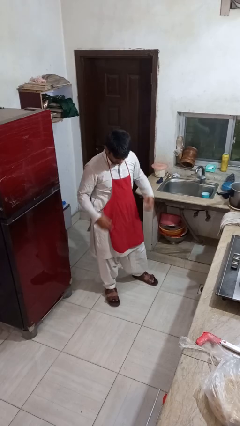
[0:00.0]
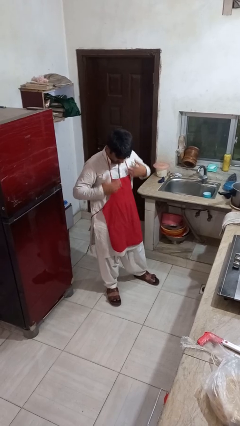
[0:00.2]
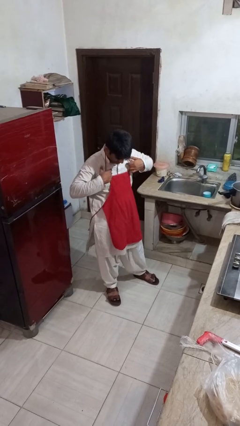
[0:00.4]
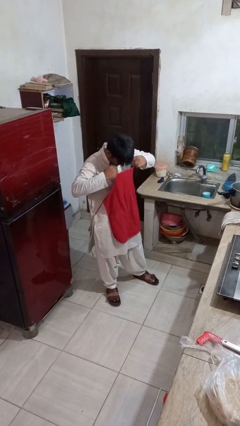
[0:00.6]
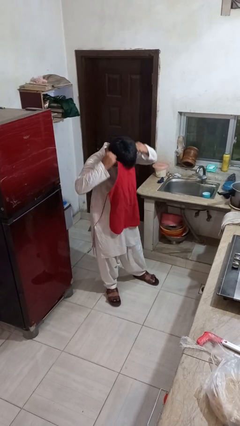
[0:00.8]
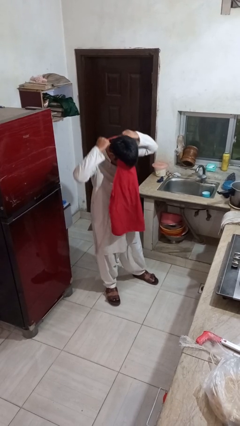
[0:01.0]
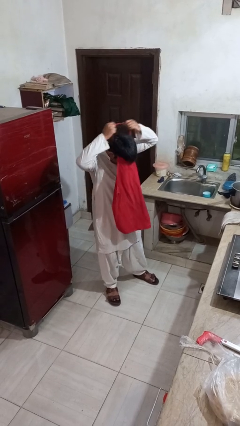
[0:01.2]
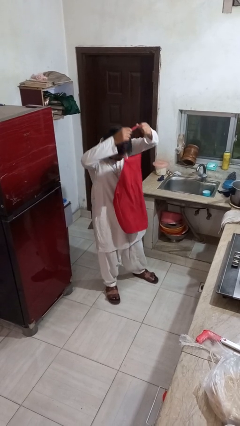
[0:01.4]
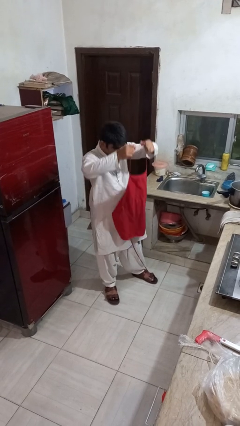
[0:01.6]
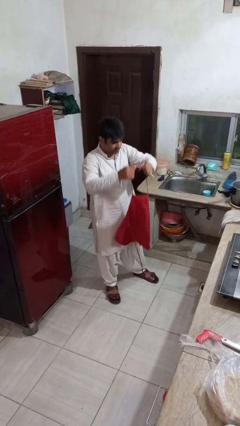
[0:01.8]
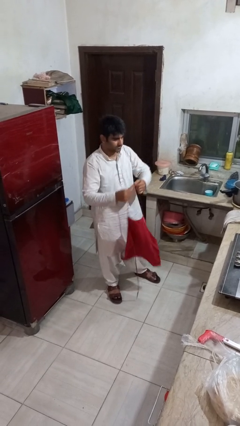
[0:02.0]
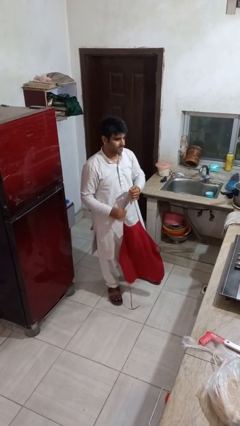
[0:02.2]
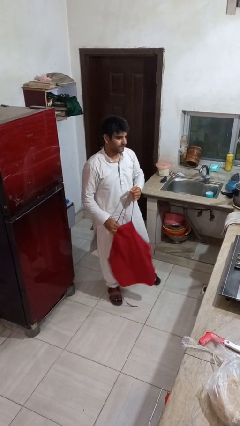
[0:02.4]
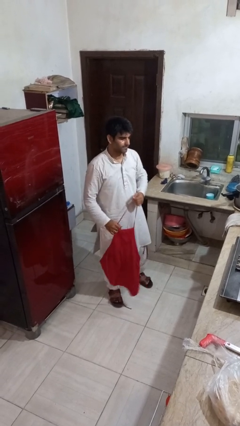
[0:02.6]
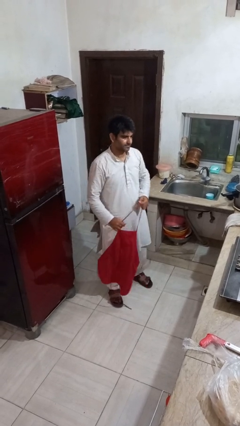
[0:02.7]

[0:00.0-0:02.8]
person takes off apron

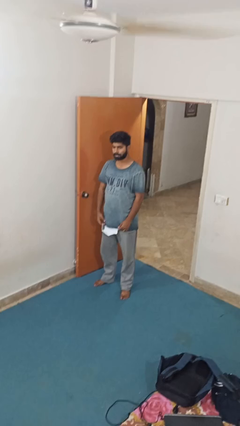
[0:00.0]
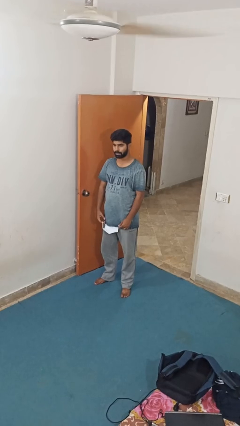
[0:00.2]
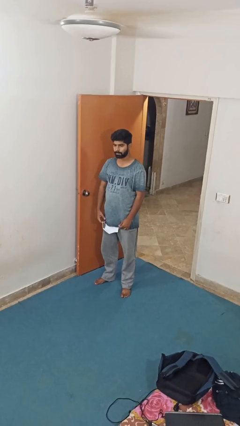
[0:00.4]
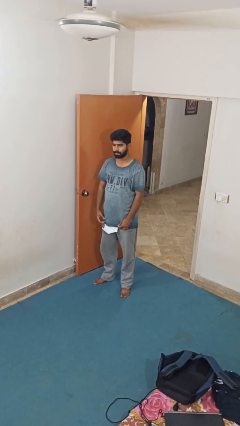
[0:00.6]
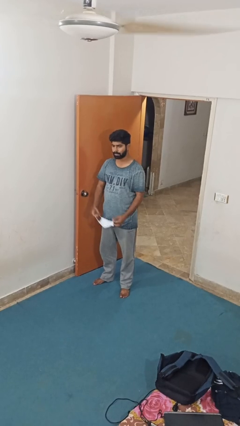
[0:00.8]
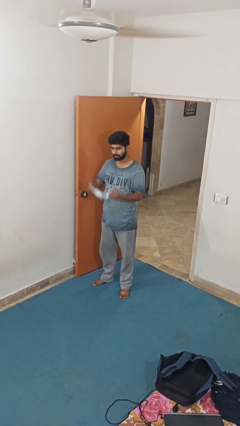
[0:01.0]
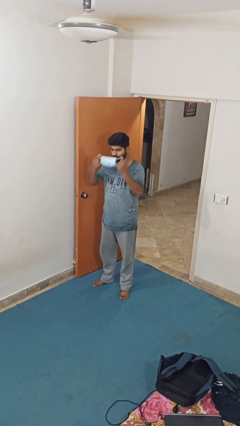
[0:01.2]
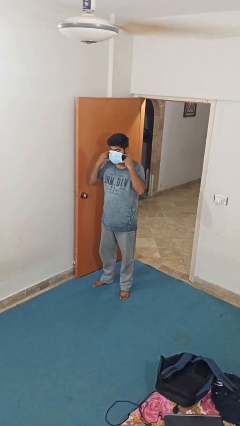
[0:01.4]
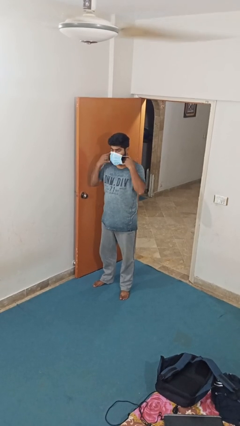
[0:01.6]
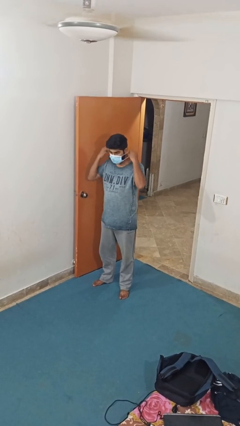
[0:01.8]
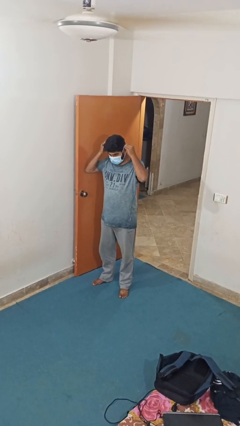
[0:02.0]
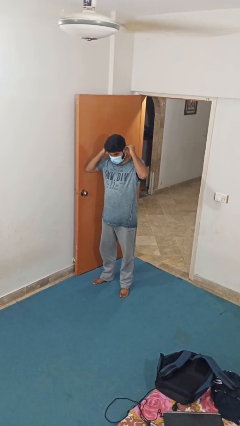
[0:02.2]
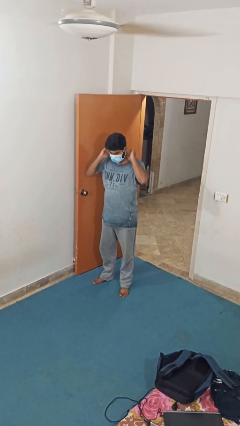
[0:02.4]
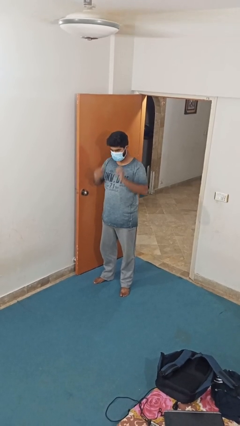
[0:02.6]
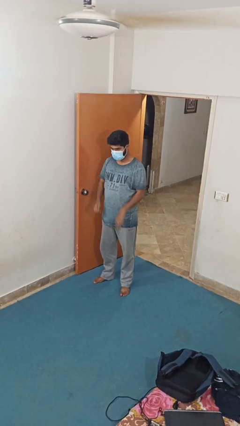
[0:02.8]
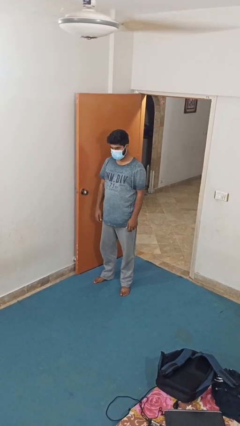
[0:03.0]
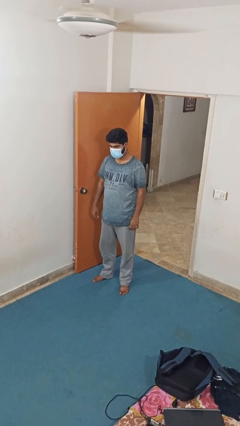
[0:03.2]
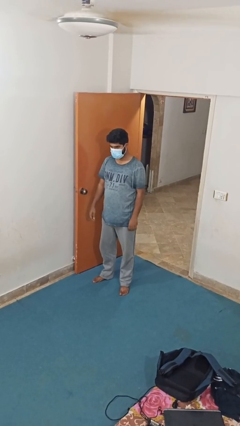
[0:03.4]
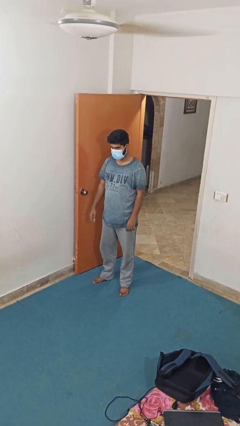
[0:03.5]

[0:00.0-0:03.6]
person puts on facemask

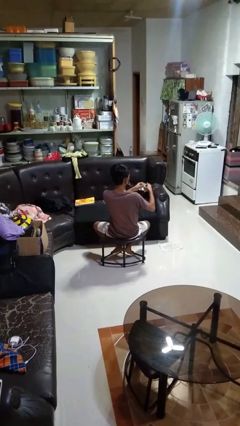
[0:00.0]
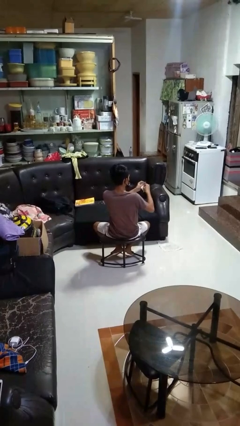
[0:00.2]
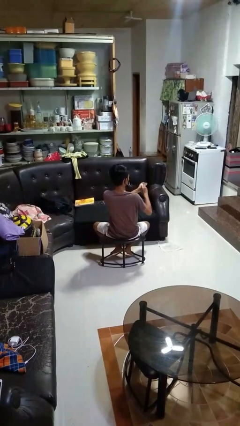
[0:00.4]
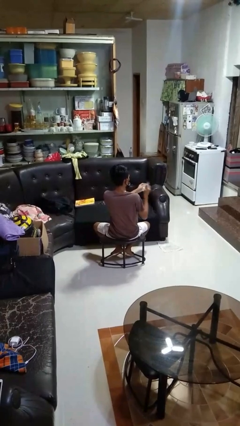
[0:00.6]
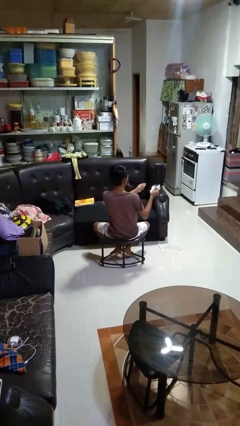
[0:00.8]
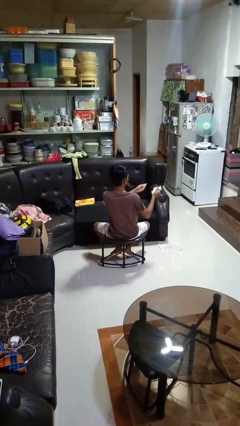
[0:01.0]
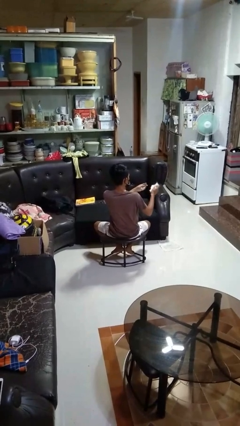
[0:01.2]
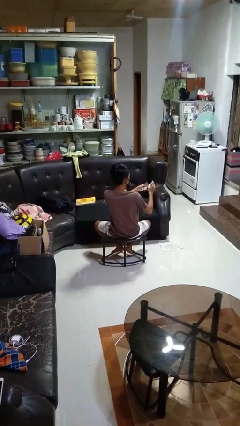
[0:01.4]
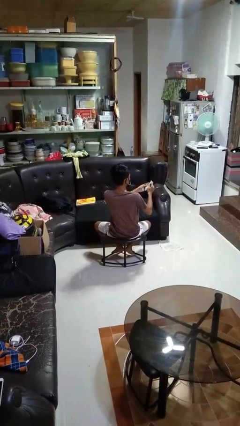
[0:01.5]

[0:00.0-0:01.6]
person tears paper

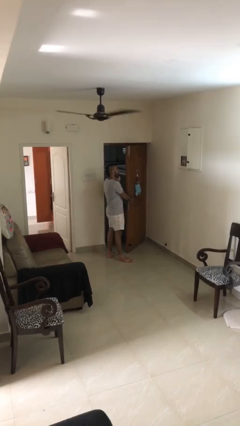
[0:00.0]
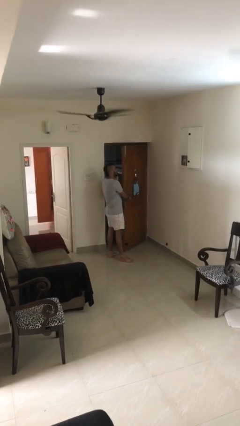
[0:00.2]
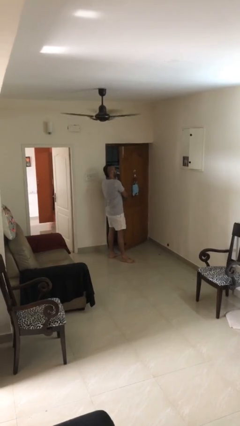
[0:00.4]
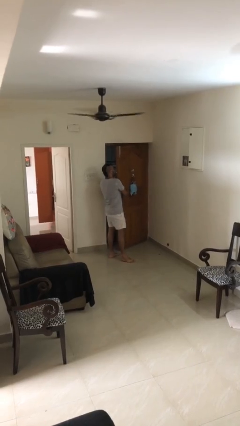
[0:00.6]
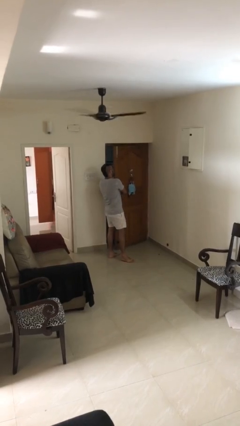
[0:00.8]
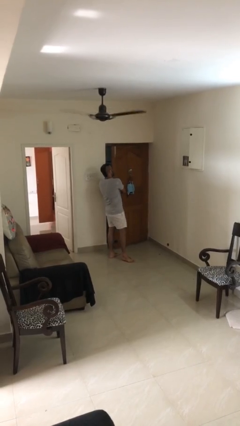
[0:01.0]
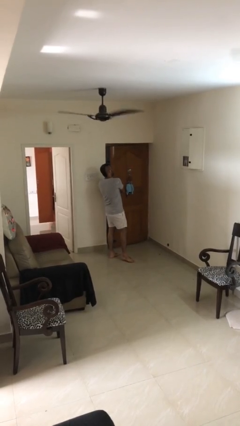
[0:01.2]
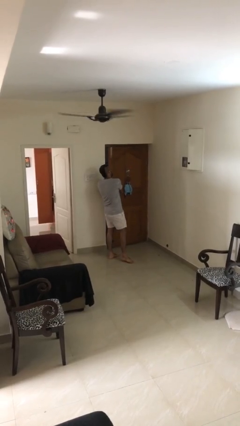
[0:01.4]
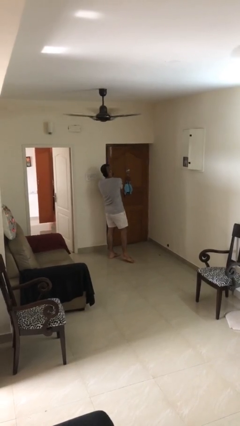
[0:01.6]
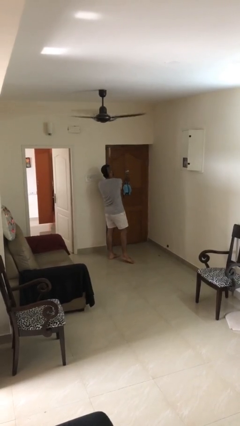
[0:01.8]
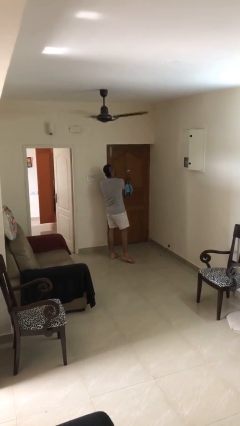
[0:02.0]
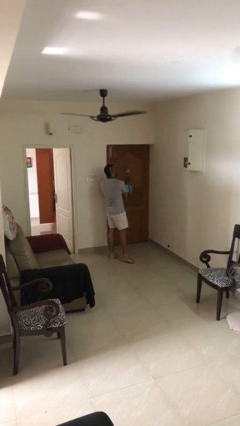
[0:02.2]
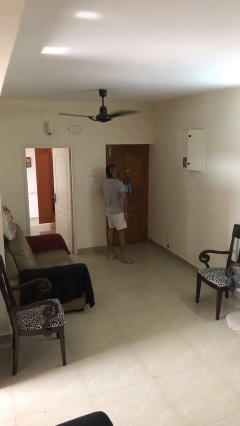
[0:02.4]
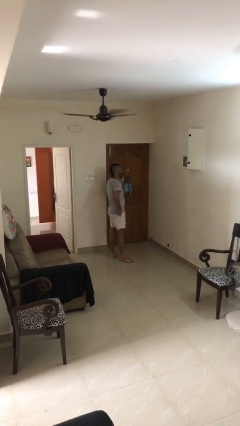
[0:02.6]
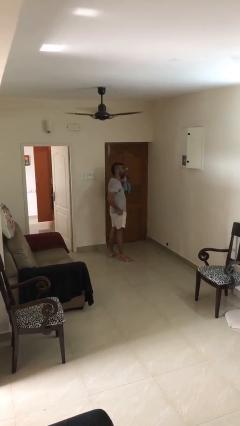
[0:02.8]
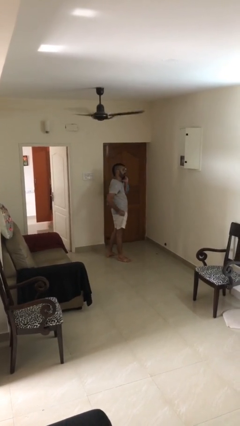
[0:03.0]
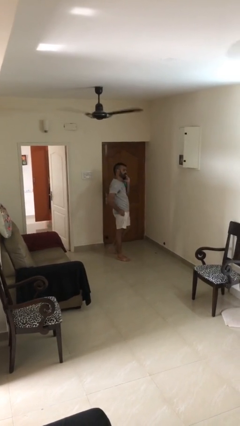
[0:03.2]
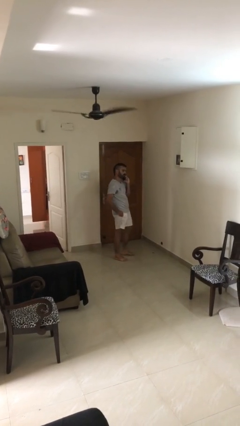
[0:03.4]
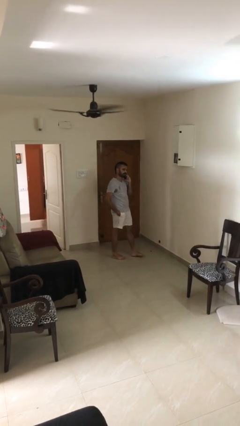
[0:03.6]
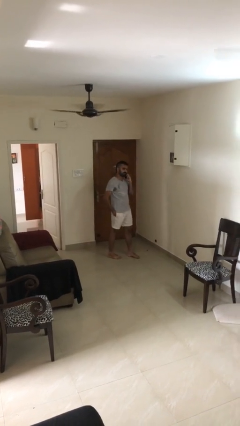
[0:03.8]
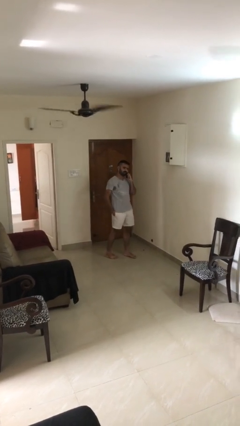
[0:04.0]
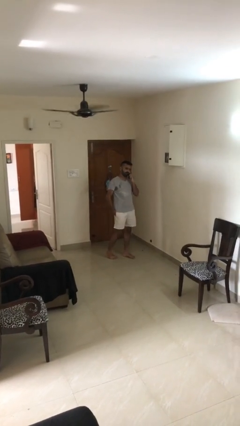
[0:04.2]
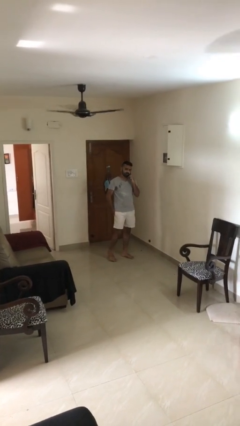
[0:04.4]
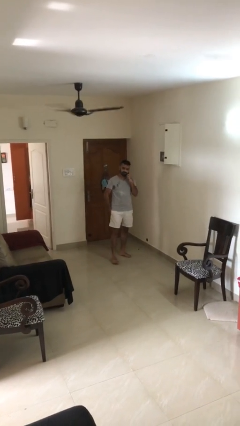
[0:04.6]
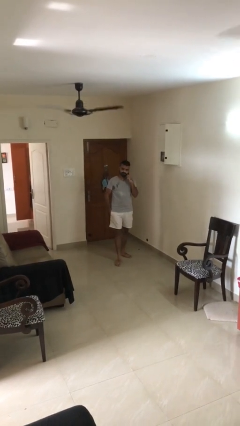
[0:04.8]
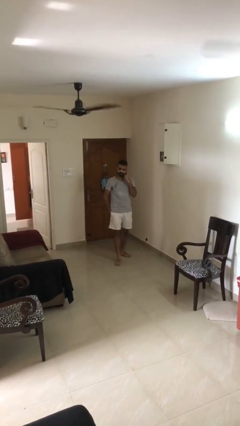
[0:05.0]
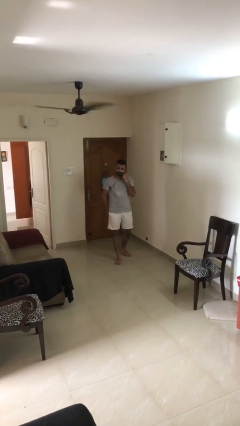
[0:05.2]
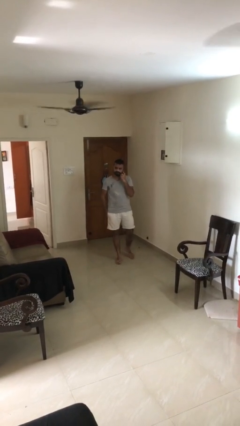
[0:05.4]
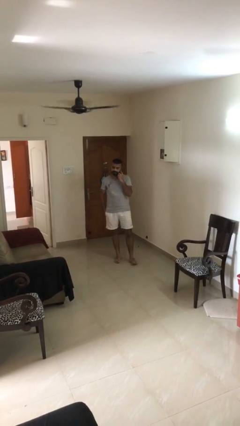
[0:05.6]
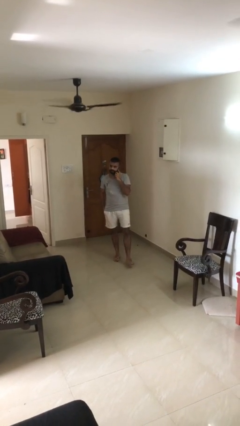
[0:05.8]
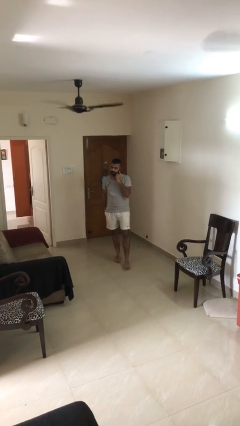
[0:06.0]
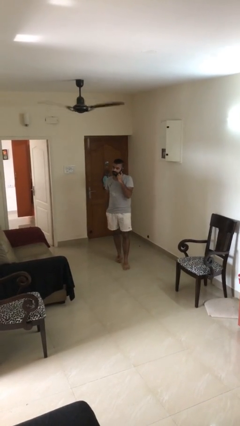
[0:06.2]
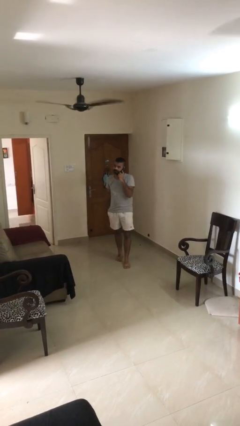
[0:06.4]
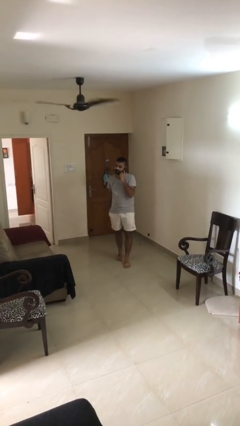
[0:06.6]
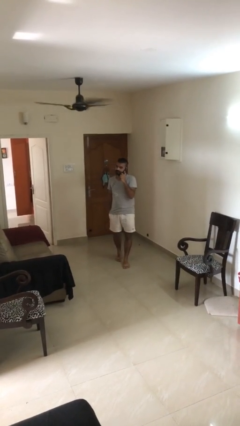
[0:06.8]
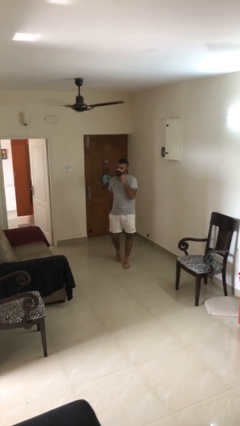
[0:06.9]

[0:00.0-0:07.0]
person closes facility door

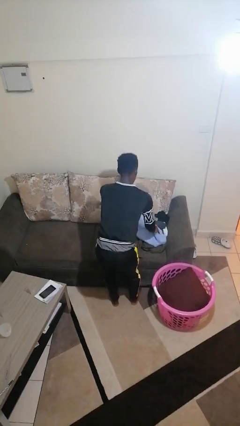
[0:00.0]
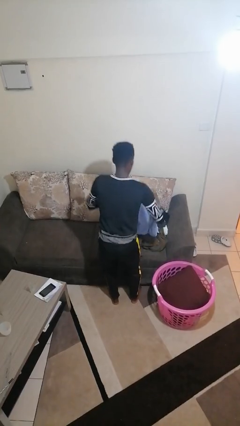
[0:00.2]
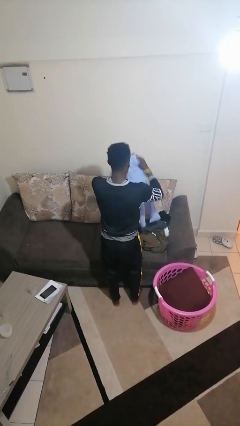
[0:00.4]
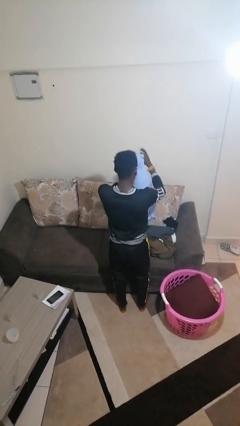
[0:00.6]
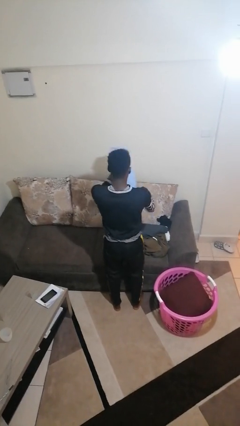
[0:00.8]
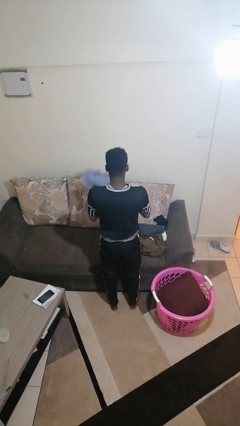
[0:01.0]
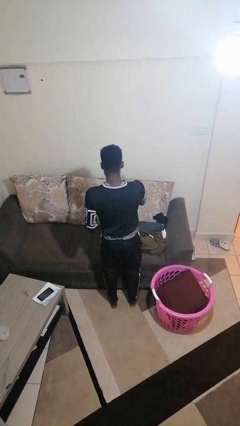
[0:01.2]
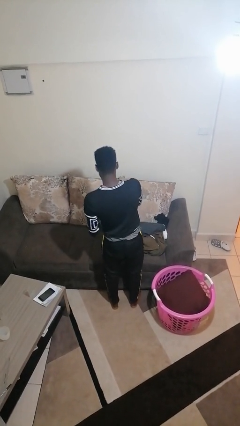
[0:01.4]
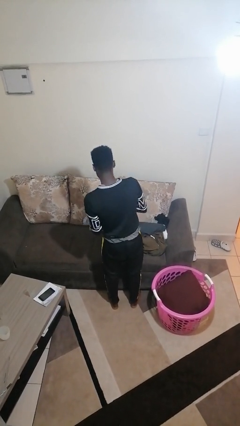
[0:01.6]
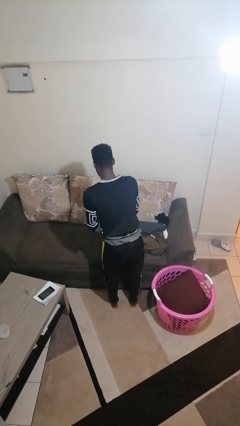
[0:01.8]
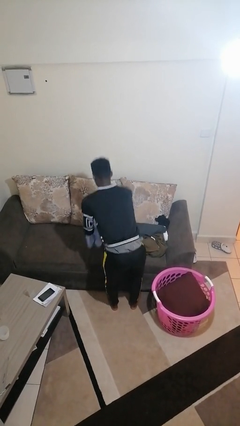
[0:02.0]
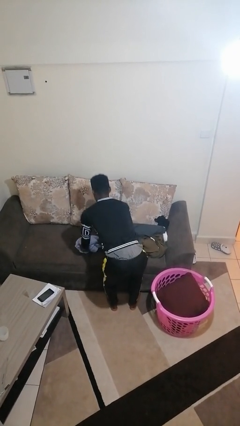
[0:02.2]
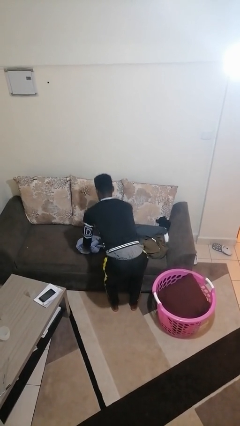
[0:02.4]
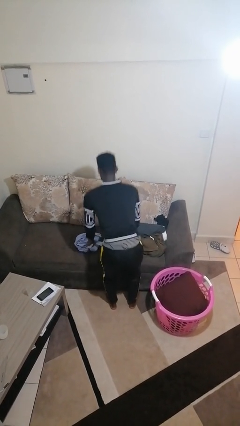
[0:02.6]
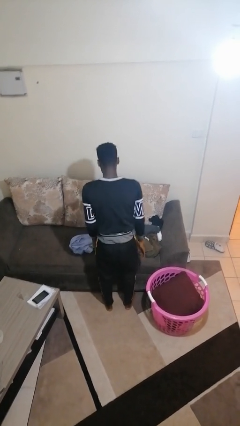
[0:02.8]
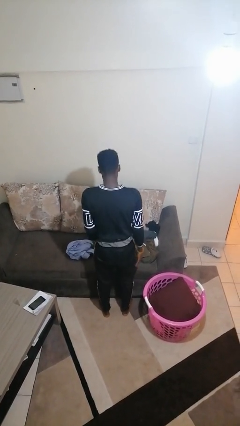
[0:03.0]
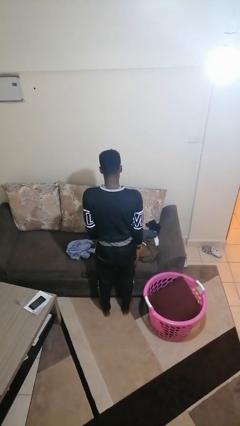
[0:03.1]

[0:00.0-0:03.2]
person folds shirt
